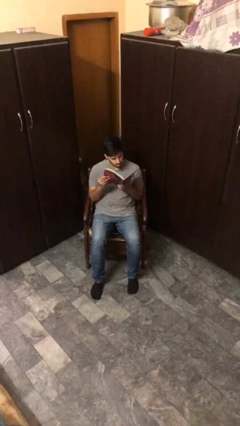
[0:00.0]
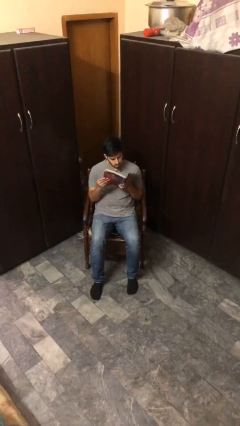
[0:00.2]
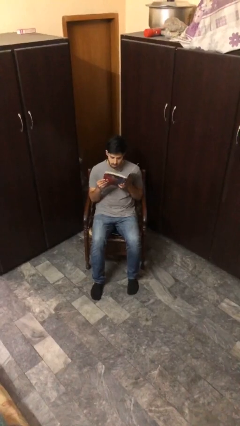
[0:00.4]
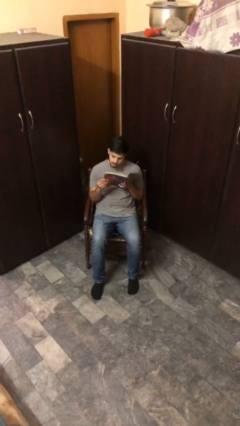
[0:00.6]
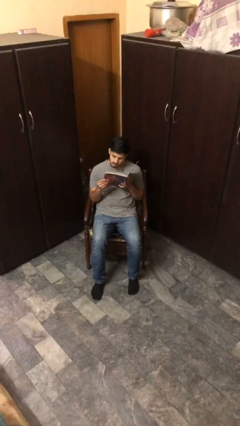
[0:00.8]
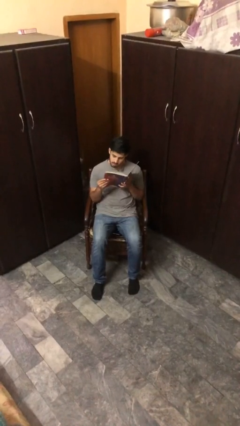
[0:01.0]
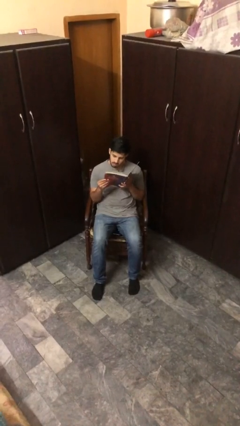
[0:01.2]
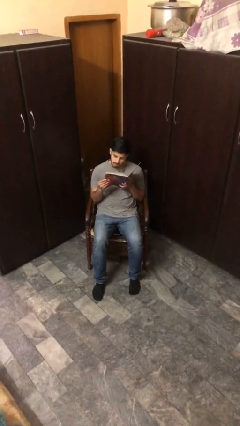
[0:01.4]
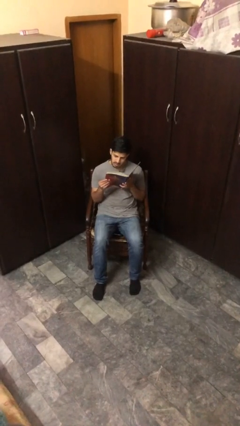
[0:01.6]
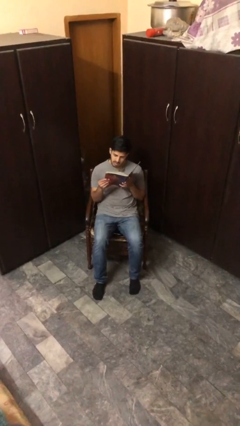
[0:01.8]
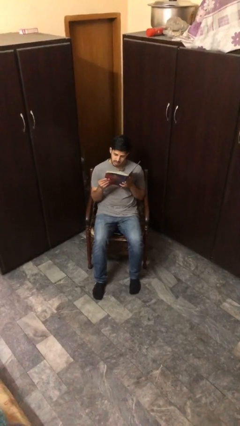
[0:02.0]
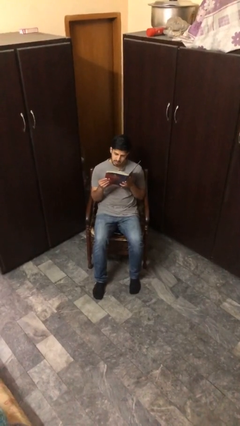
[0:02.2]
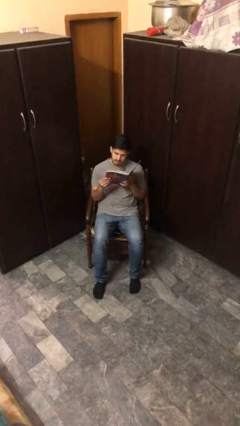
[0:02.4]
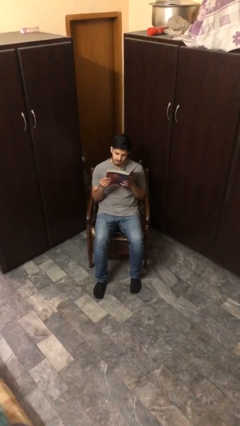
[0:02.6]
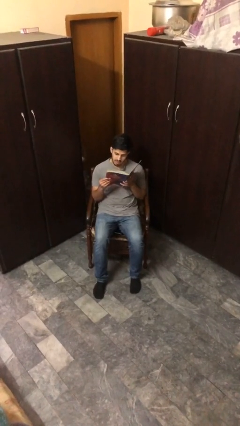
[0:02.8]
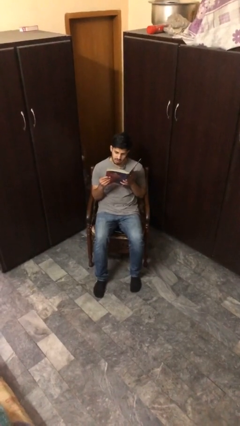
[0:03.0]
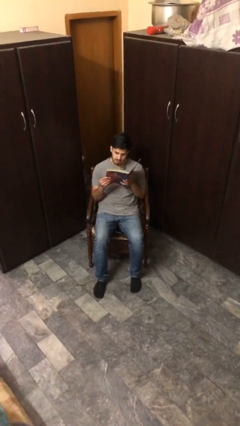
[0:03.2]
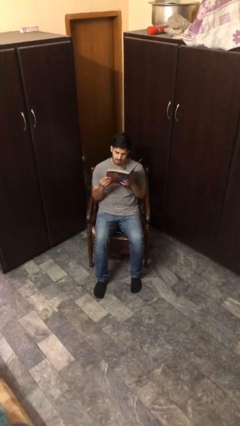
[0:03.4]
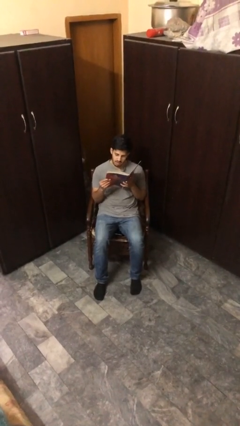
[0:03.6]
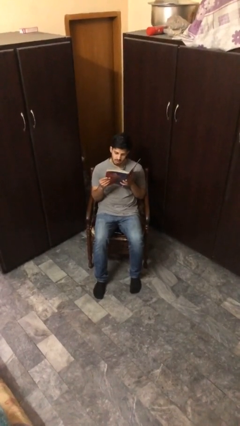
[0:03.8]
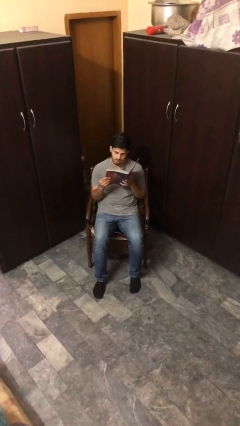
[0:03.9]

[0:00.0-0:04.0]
person reads document

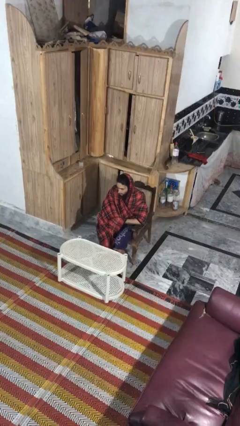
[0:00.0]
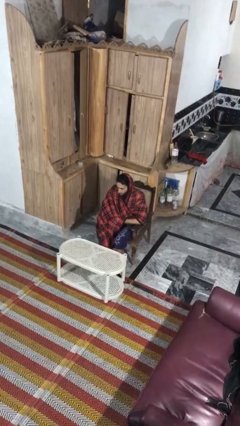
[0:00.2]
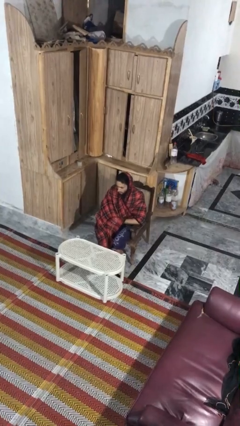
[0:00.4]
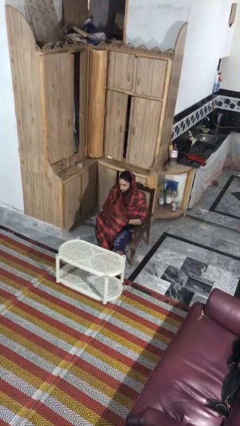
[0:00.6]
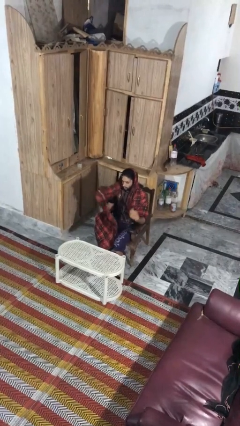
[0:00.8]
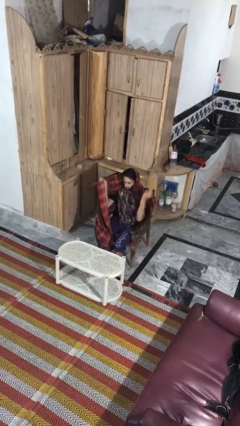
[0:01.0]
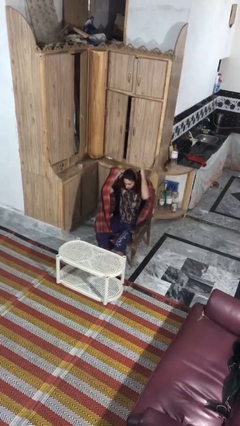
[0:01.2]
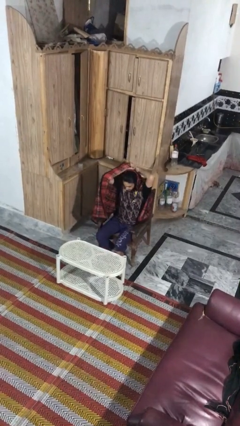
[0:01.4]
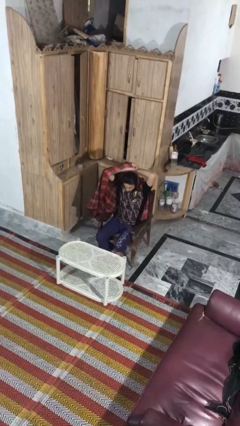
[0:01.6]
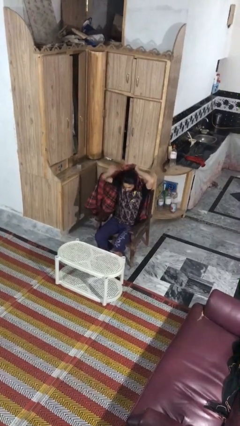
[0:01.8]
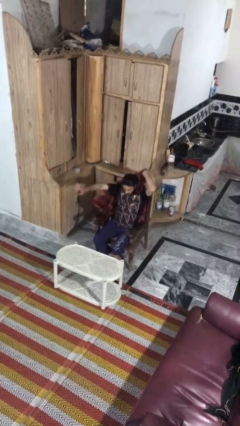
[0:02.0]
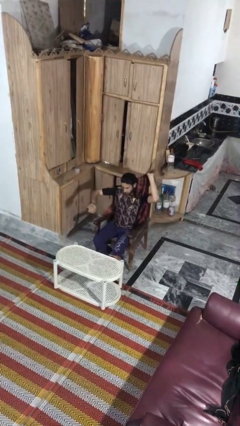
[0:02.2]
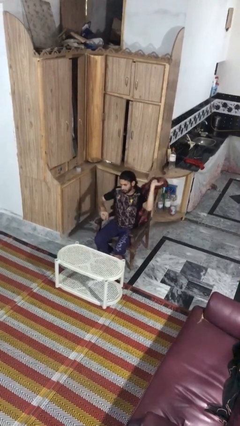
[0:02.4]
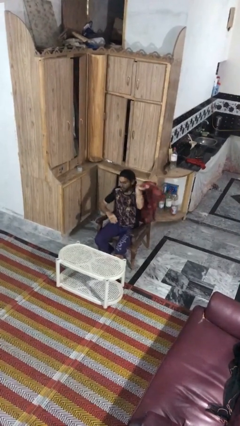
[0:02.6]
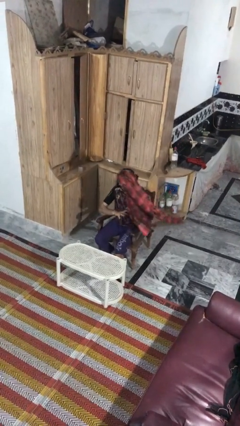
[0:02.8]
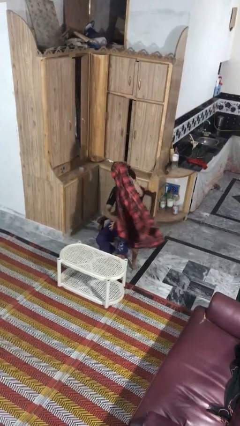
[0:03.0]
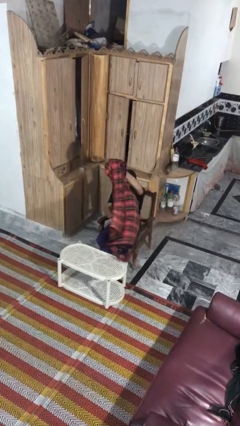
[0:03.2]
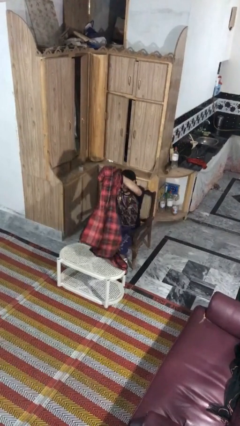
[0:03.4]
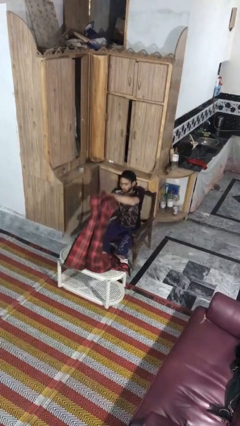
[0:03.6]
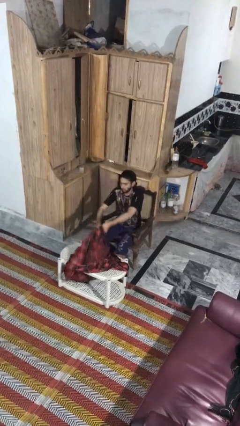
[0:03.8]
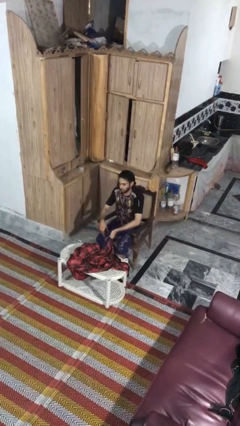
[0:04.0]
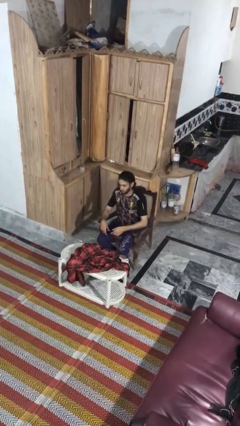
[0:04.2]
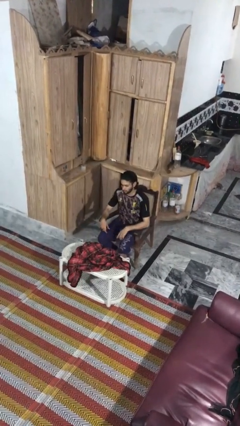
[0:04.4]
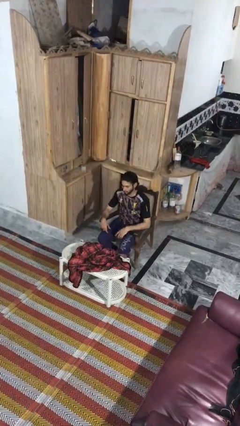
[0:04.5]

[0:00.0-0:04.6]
person uncovers with blanket

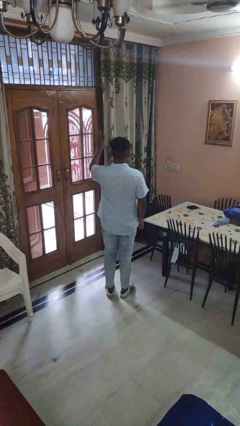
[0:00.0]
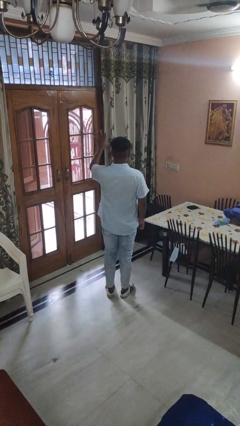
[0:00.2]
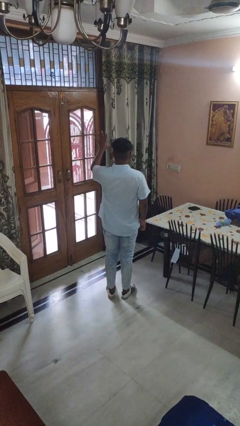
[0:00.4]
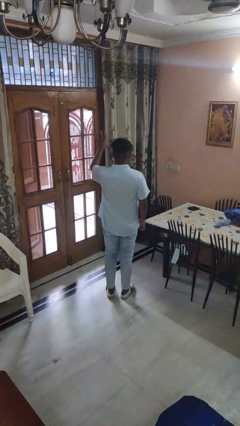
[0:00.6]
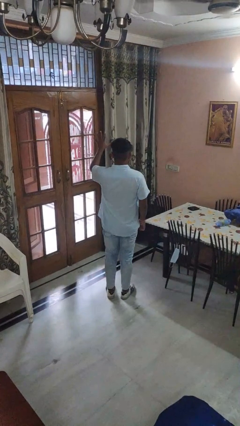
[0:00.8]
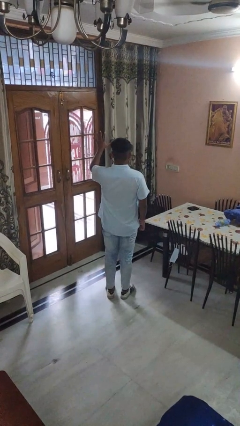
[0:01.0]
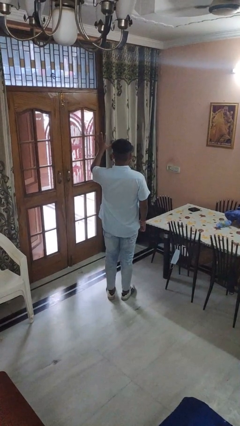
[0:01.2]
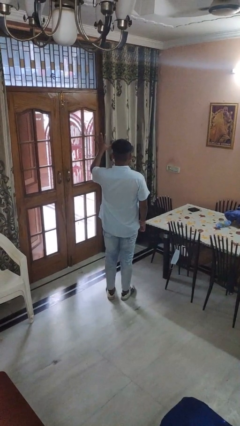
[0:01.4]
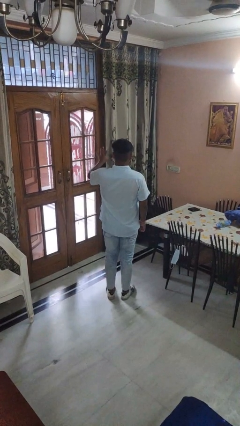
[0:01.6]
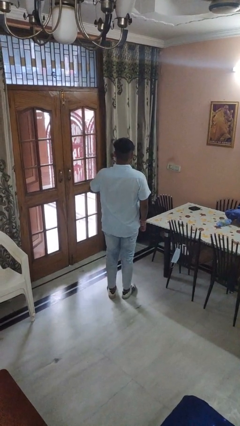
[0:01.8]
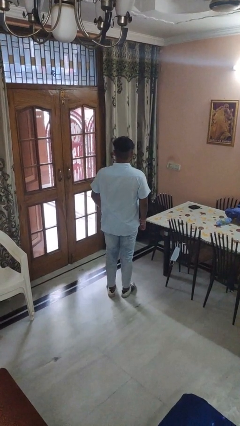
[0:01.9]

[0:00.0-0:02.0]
person gestures number five

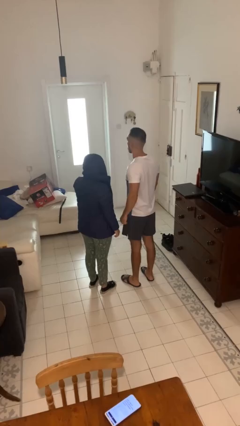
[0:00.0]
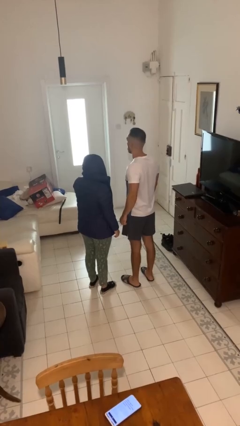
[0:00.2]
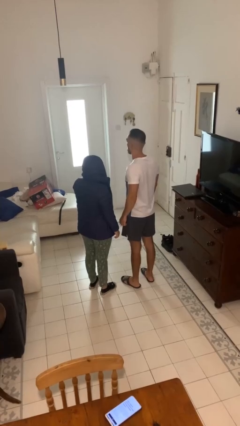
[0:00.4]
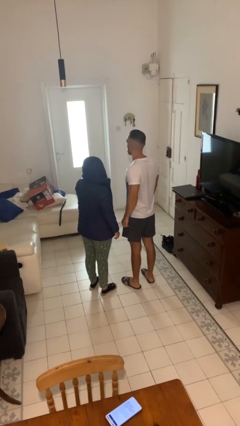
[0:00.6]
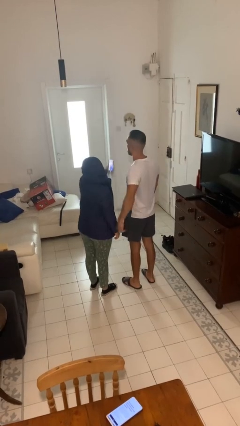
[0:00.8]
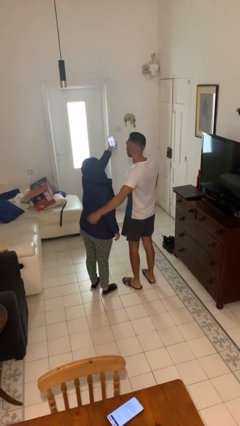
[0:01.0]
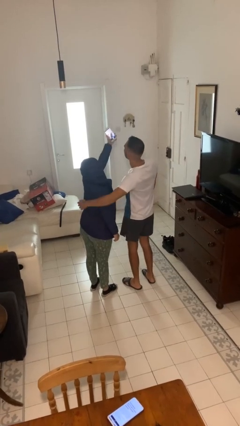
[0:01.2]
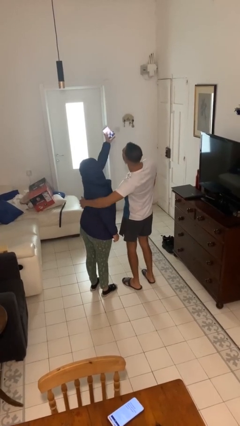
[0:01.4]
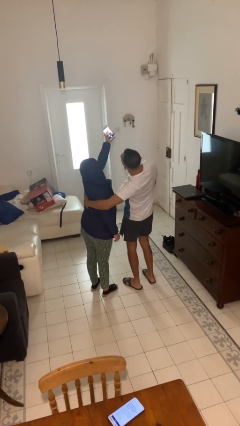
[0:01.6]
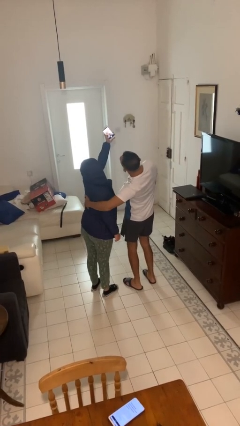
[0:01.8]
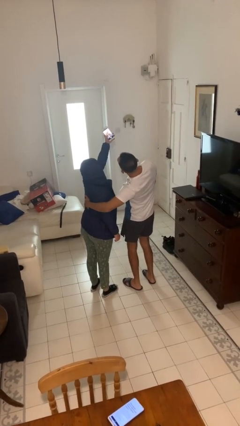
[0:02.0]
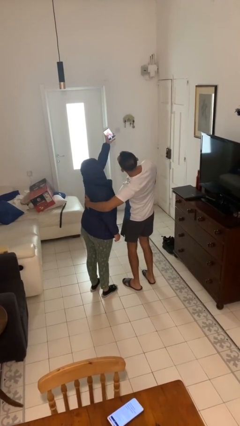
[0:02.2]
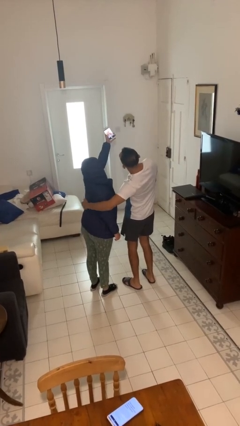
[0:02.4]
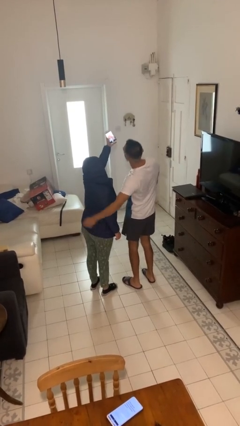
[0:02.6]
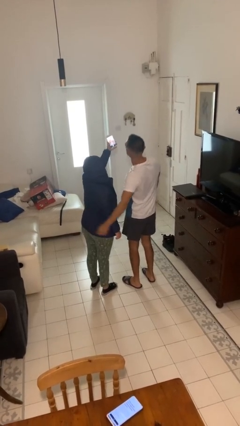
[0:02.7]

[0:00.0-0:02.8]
person takes selfie with person

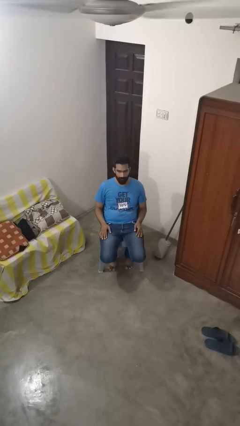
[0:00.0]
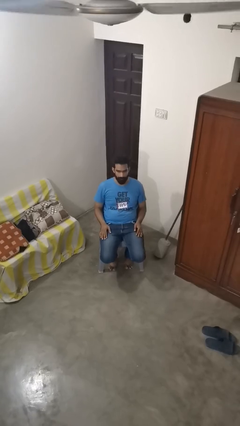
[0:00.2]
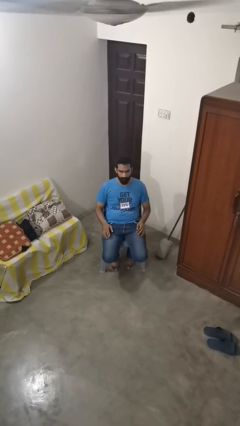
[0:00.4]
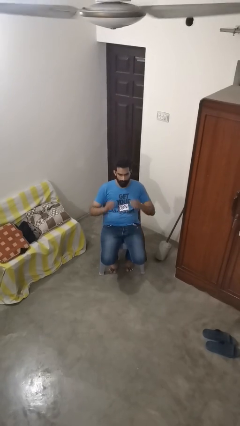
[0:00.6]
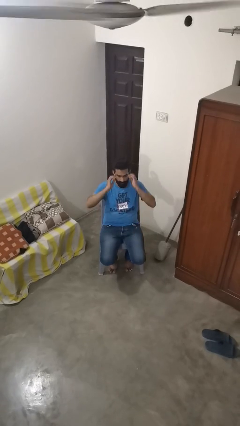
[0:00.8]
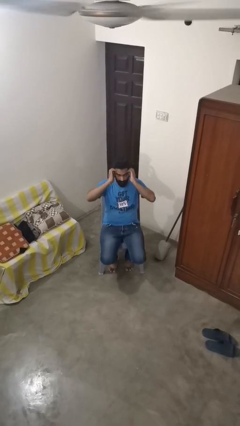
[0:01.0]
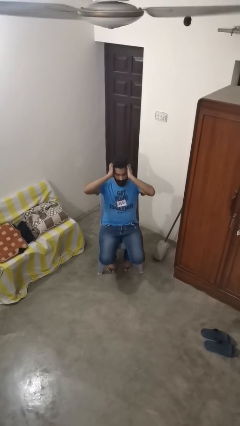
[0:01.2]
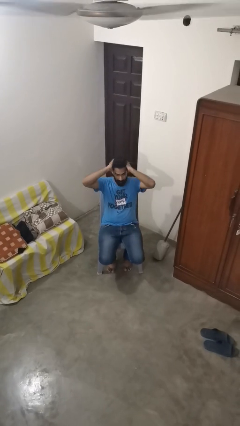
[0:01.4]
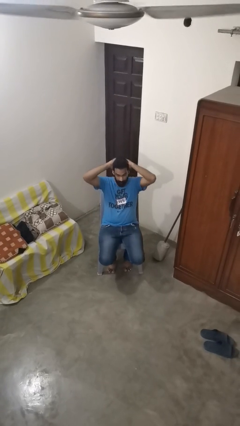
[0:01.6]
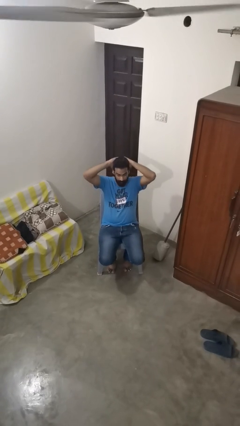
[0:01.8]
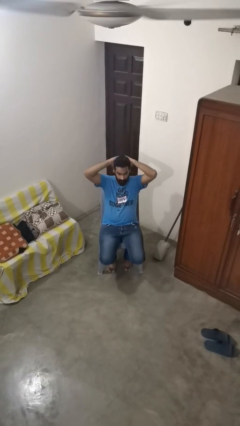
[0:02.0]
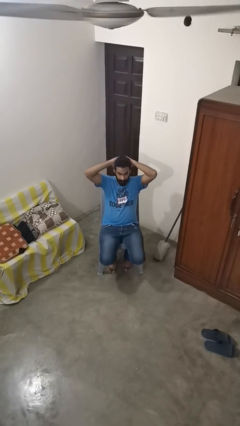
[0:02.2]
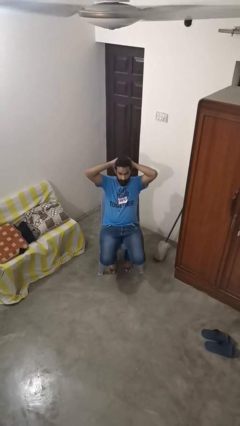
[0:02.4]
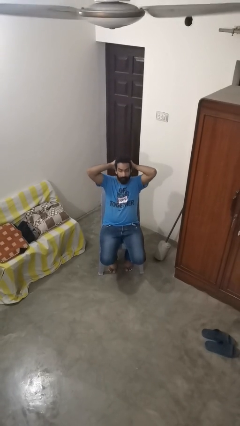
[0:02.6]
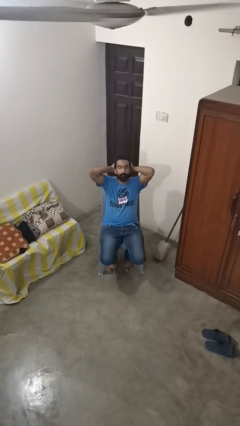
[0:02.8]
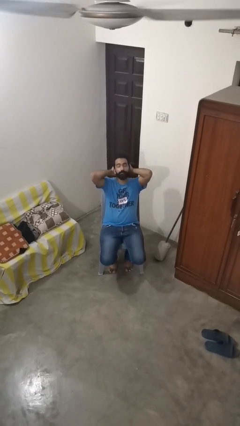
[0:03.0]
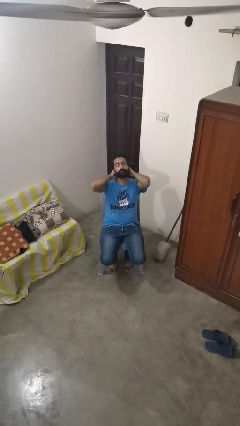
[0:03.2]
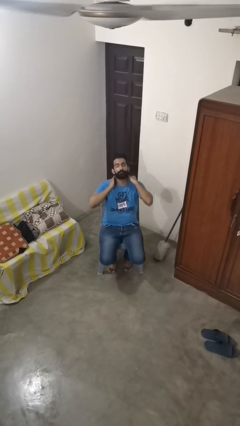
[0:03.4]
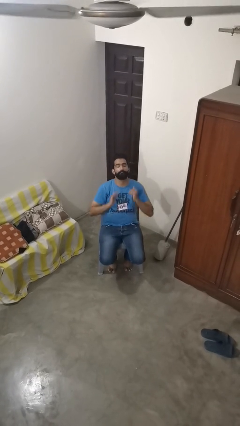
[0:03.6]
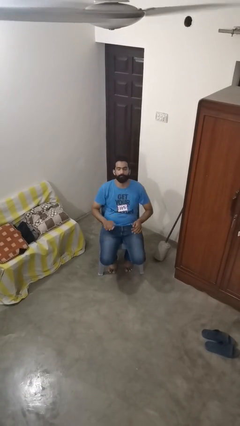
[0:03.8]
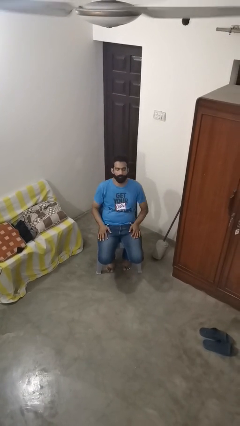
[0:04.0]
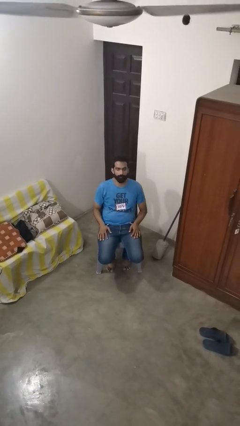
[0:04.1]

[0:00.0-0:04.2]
person strokes hair
